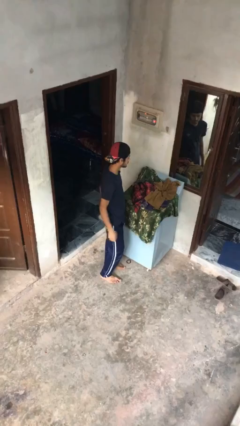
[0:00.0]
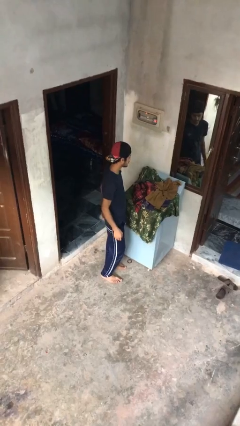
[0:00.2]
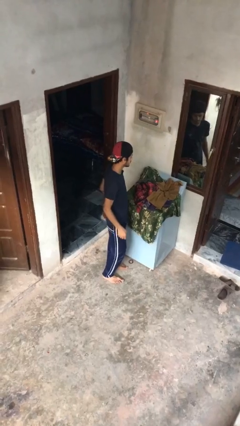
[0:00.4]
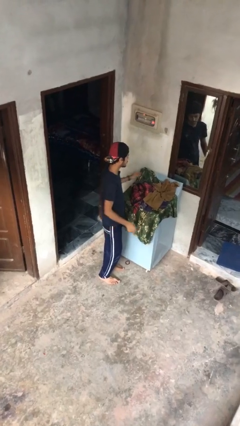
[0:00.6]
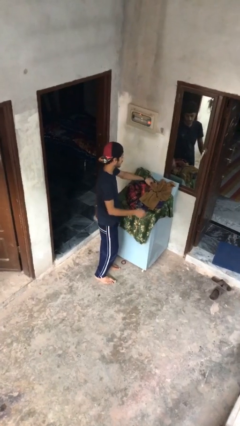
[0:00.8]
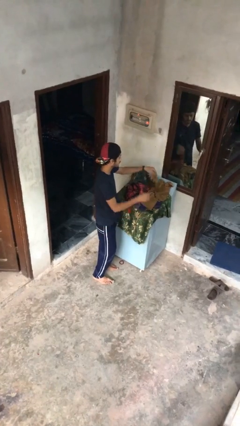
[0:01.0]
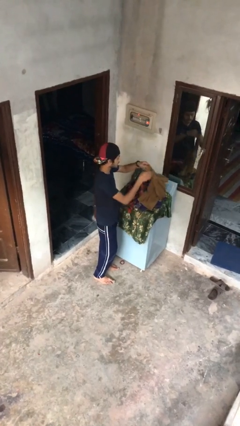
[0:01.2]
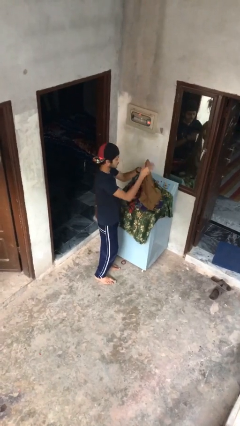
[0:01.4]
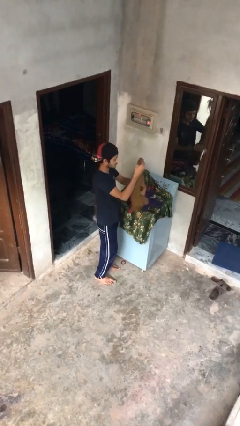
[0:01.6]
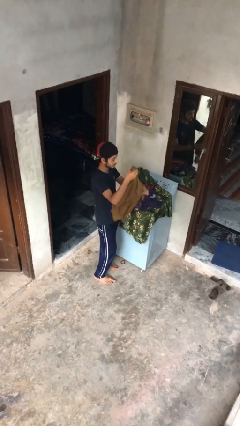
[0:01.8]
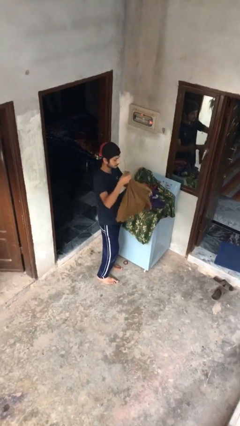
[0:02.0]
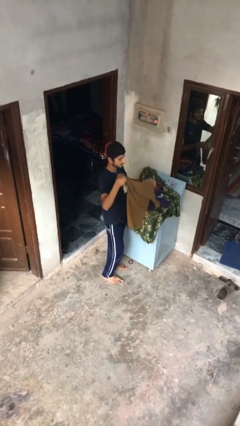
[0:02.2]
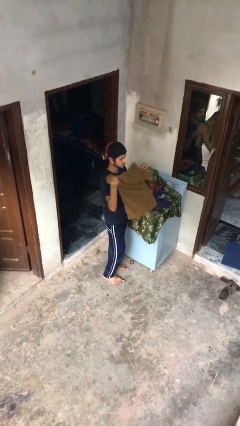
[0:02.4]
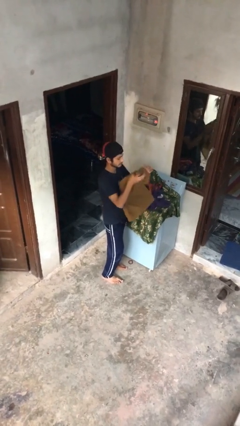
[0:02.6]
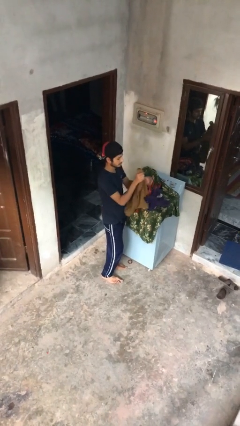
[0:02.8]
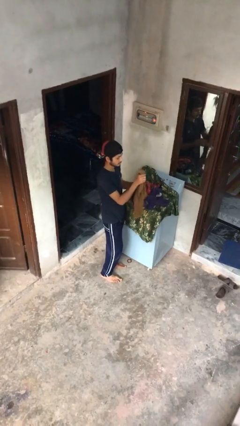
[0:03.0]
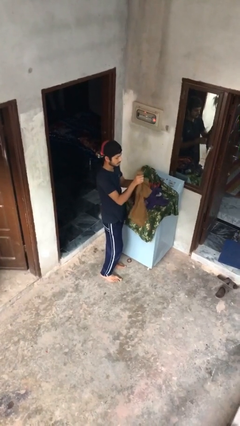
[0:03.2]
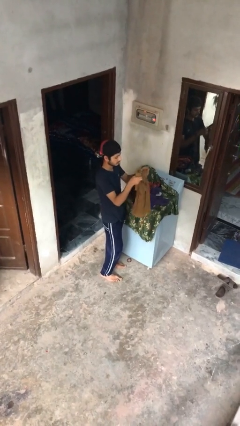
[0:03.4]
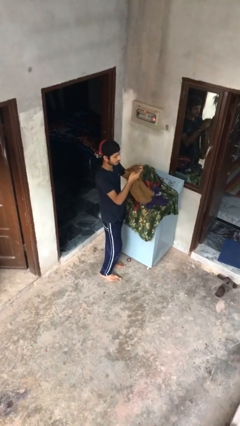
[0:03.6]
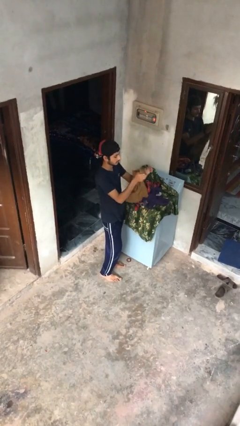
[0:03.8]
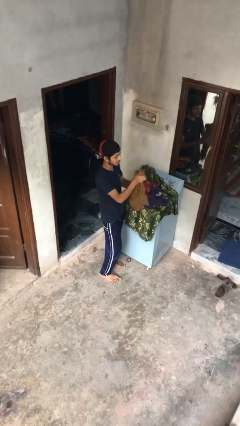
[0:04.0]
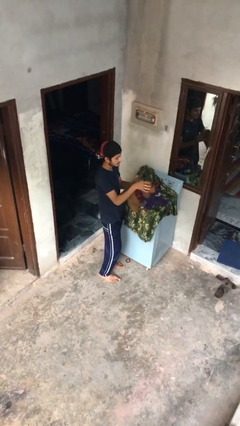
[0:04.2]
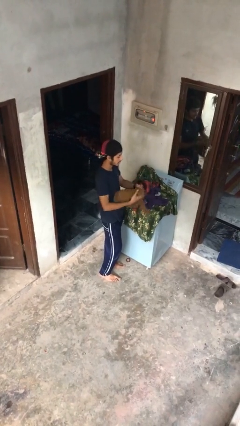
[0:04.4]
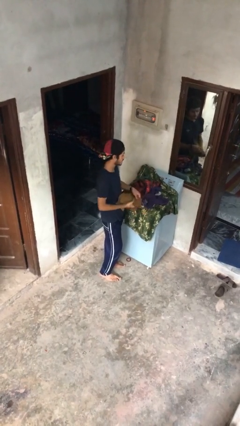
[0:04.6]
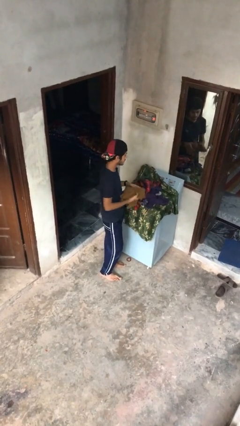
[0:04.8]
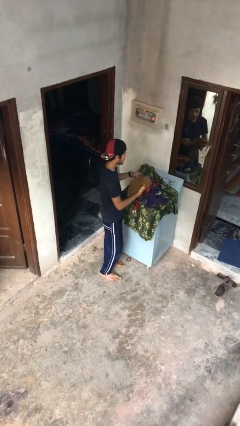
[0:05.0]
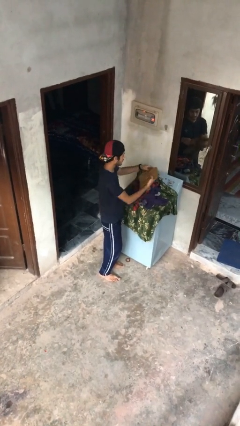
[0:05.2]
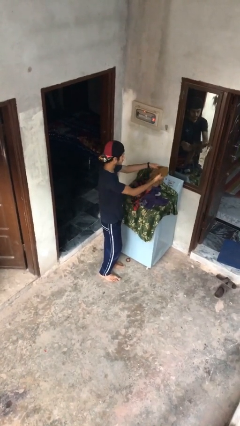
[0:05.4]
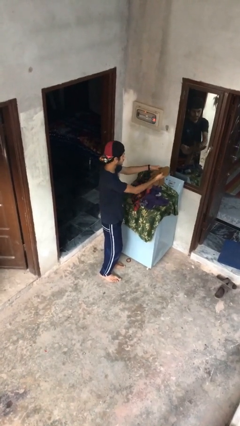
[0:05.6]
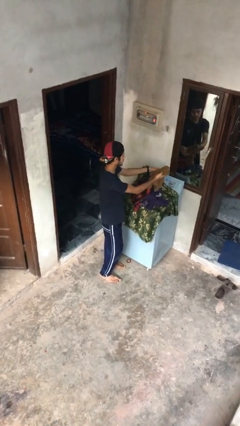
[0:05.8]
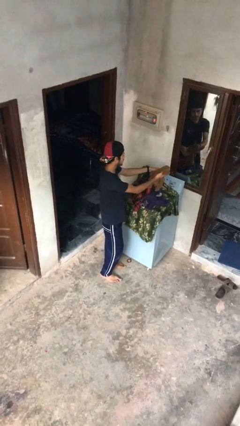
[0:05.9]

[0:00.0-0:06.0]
person folds shirt

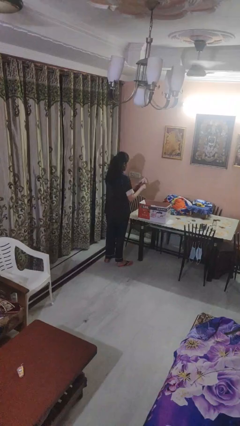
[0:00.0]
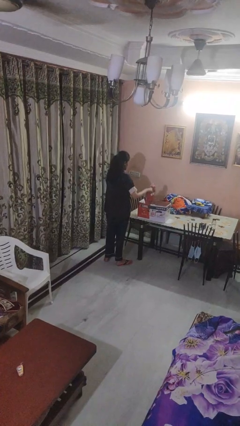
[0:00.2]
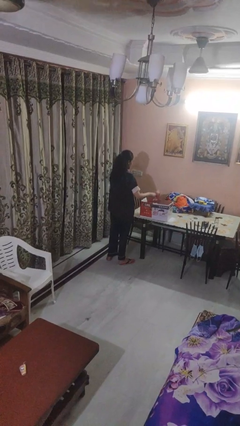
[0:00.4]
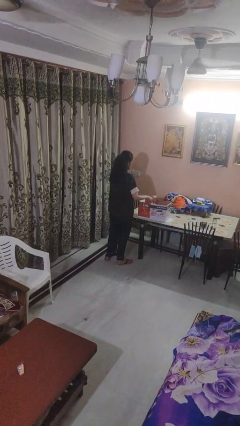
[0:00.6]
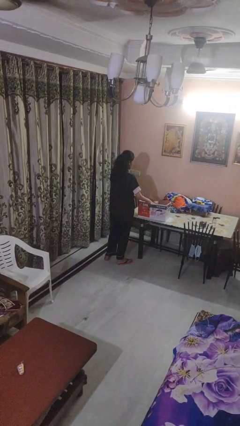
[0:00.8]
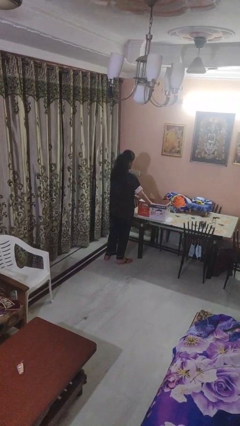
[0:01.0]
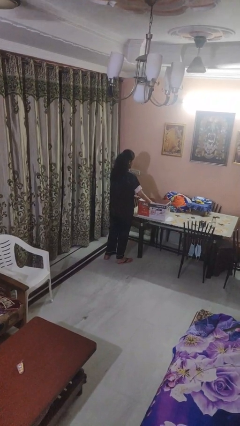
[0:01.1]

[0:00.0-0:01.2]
person puts object into box

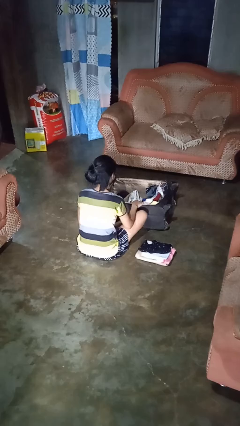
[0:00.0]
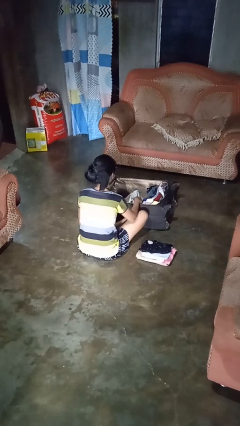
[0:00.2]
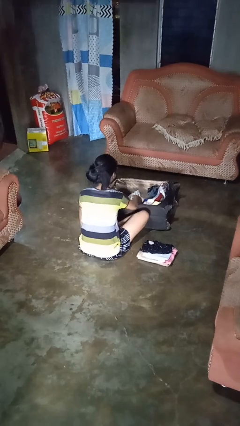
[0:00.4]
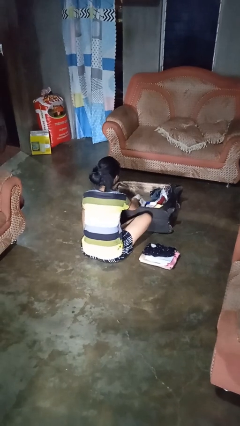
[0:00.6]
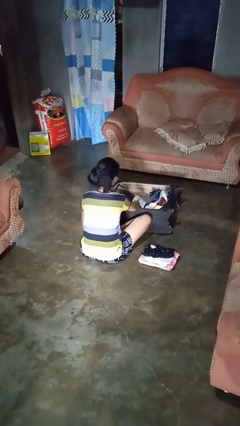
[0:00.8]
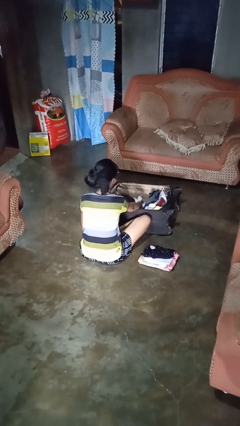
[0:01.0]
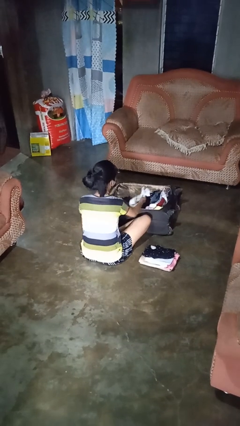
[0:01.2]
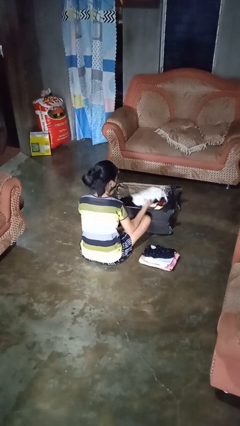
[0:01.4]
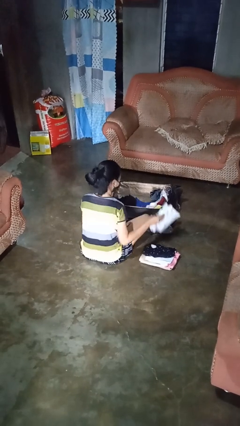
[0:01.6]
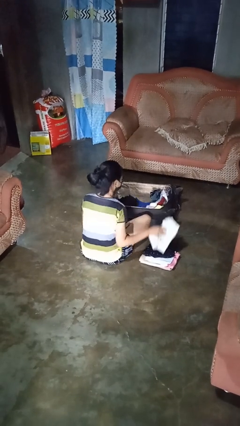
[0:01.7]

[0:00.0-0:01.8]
person unloads clothes from suitcase

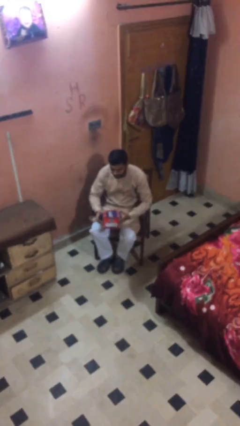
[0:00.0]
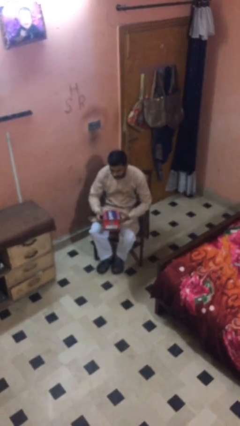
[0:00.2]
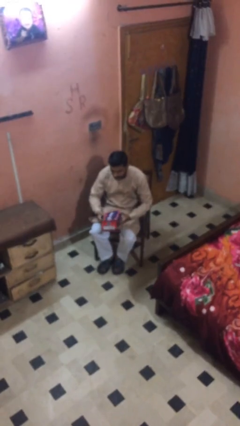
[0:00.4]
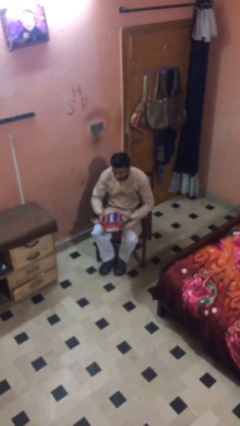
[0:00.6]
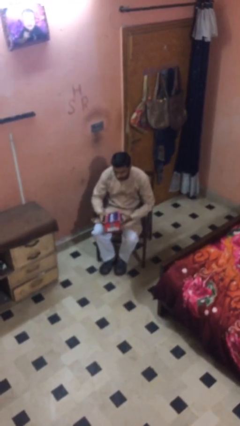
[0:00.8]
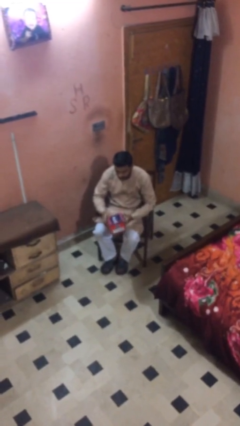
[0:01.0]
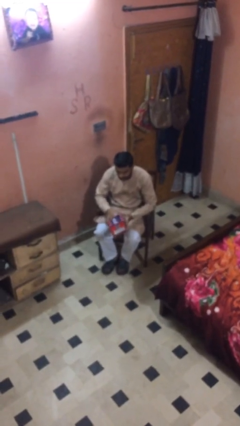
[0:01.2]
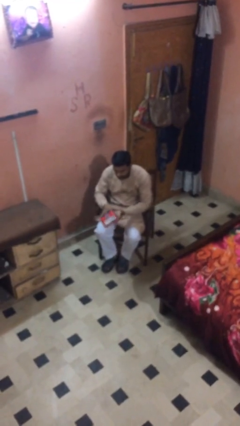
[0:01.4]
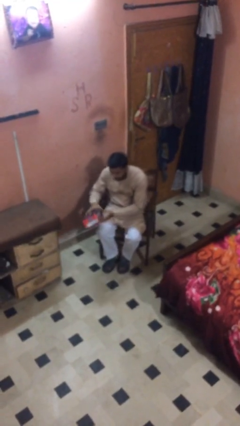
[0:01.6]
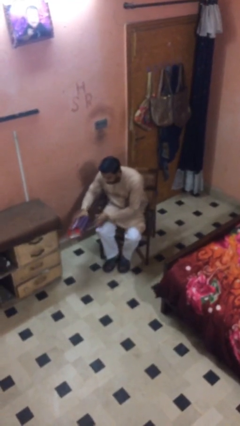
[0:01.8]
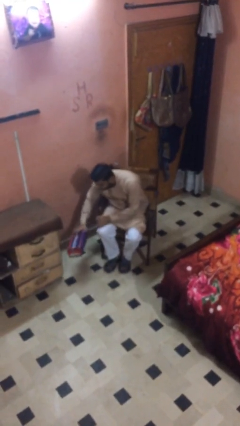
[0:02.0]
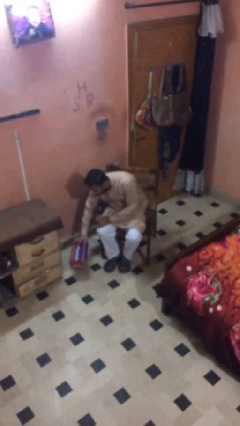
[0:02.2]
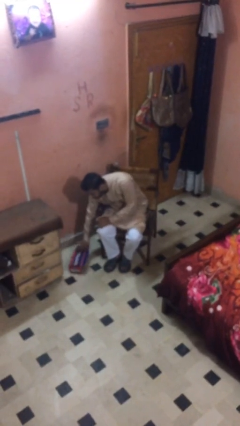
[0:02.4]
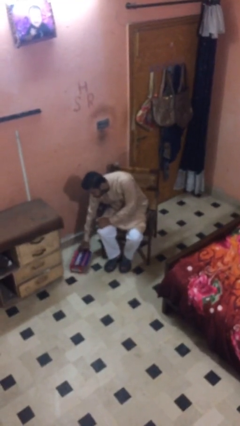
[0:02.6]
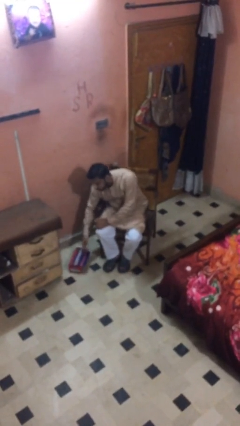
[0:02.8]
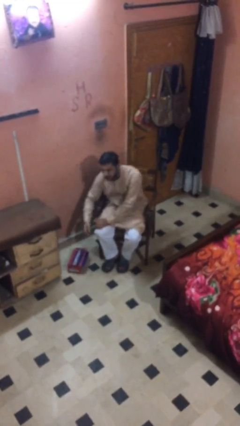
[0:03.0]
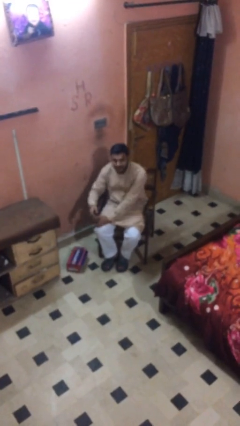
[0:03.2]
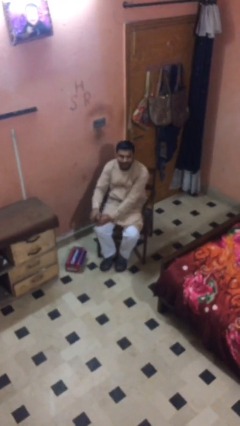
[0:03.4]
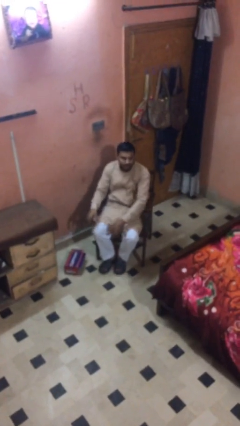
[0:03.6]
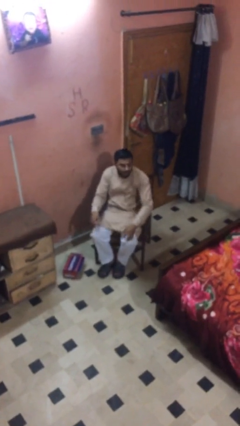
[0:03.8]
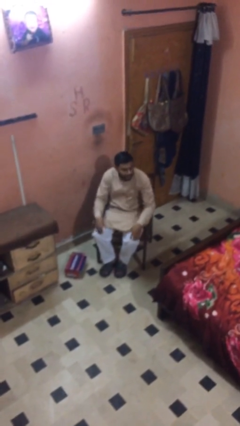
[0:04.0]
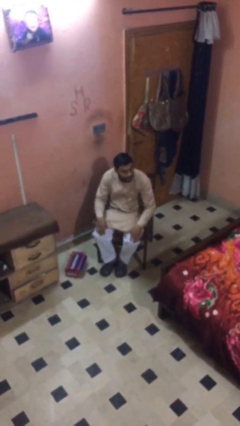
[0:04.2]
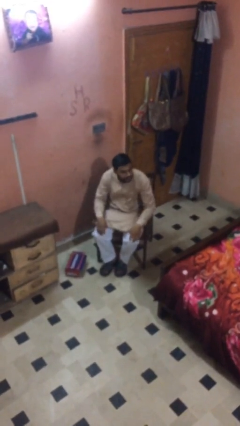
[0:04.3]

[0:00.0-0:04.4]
person puts down object on floor

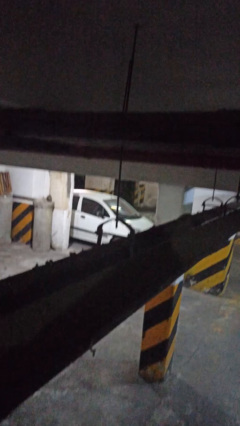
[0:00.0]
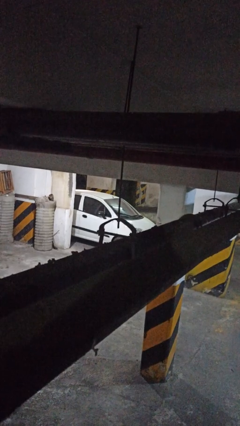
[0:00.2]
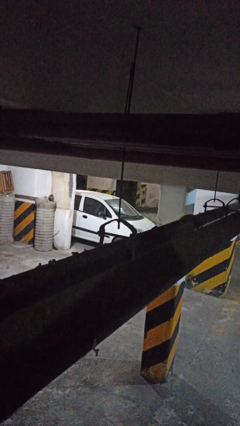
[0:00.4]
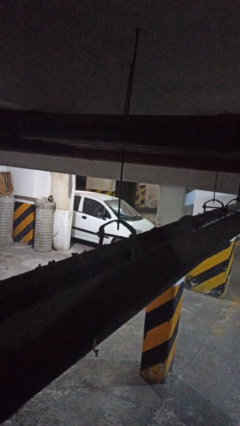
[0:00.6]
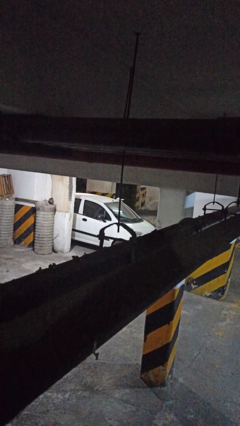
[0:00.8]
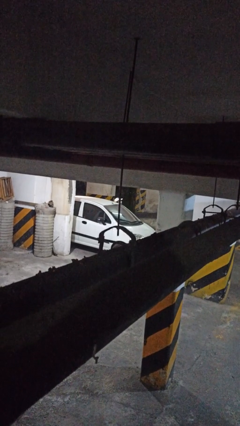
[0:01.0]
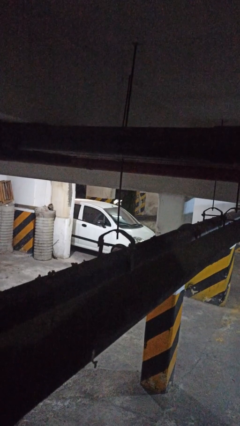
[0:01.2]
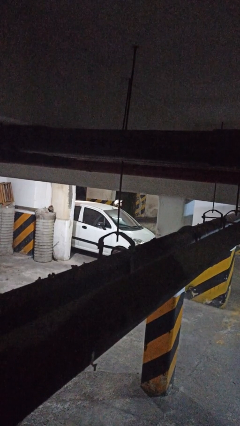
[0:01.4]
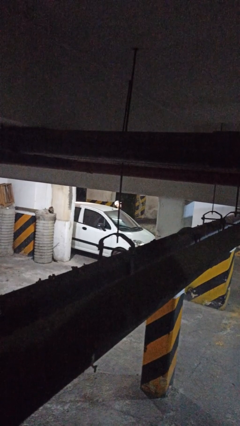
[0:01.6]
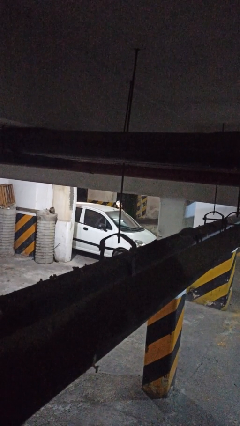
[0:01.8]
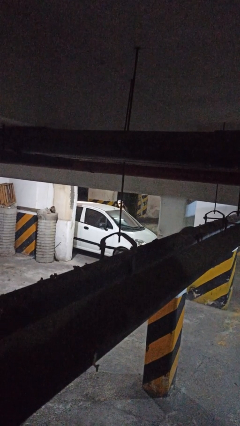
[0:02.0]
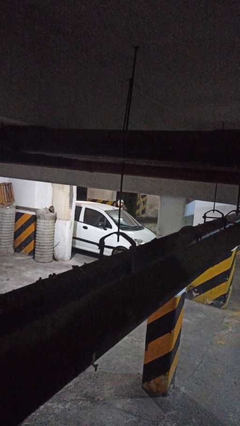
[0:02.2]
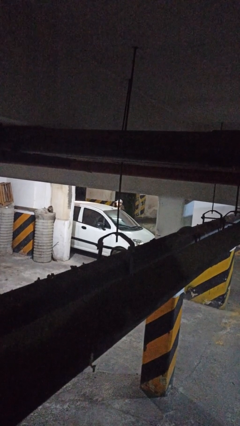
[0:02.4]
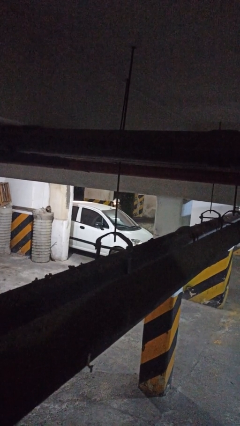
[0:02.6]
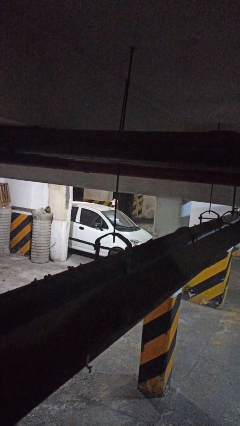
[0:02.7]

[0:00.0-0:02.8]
person exits car

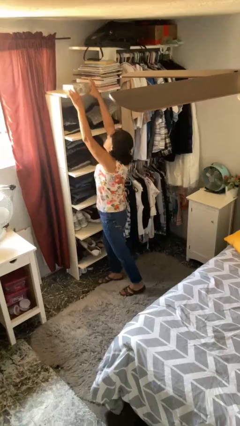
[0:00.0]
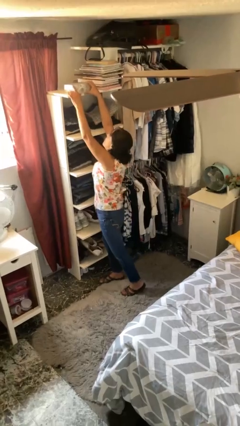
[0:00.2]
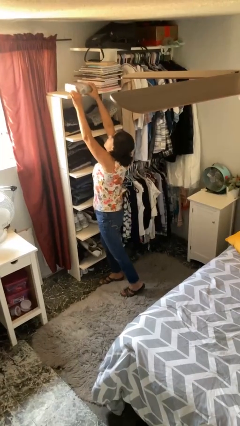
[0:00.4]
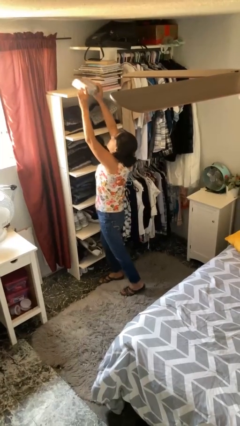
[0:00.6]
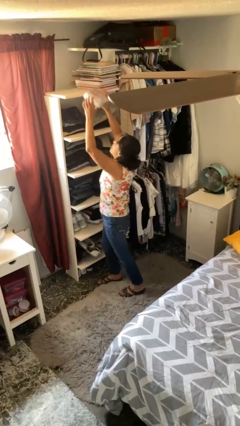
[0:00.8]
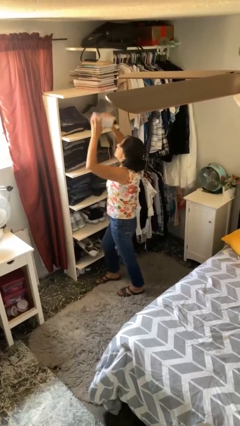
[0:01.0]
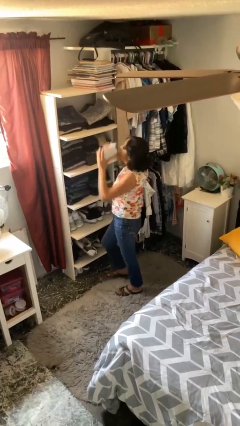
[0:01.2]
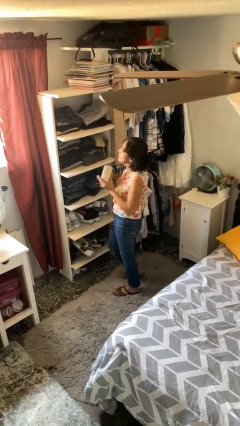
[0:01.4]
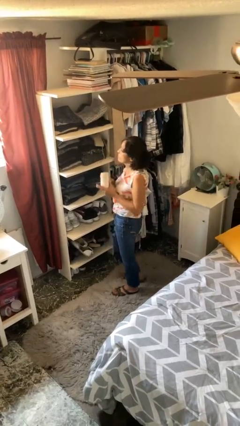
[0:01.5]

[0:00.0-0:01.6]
person picks up object from shelf
